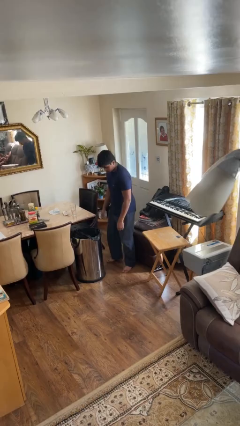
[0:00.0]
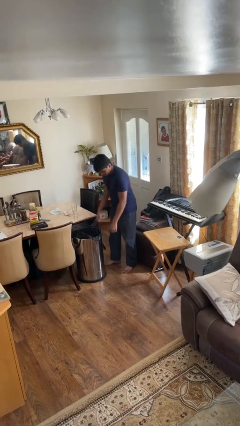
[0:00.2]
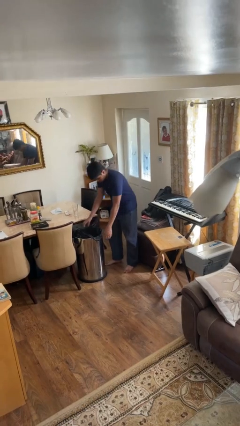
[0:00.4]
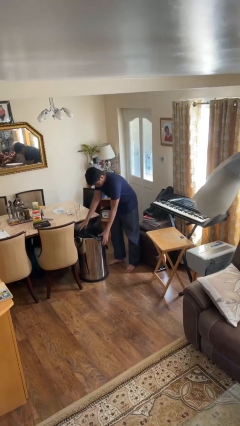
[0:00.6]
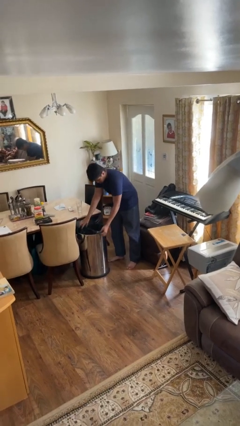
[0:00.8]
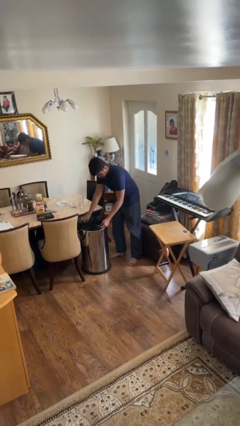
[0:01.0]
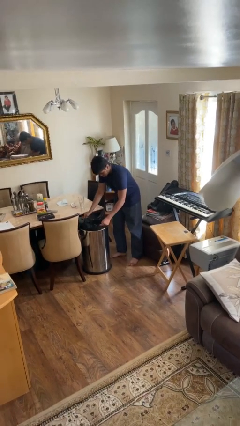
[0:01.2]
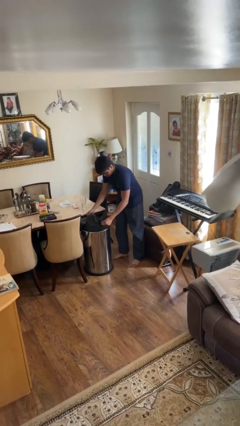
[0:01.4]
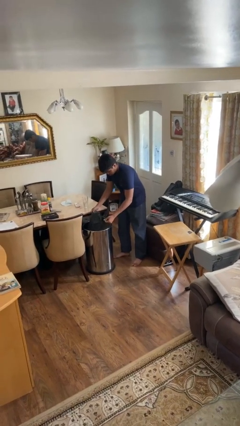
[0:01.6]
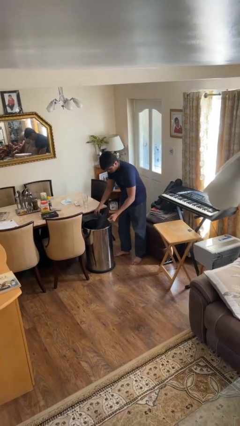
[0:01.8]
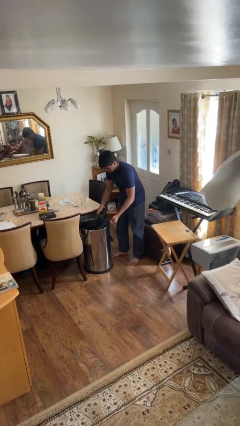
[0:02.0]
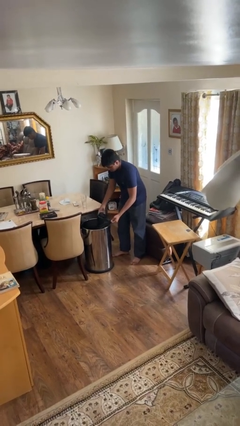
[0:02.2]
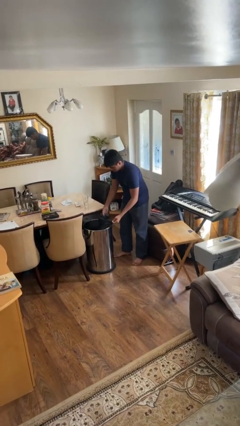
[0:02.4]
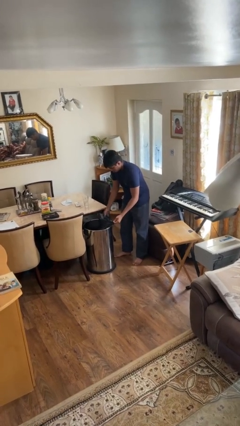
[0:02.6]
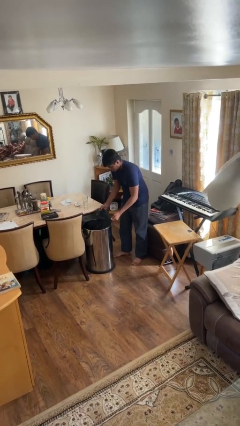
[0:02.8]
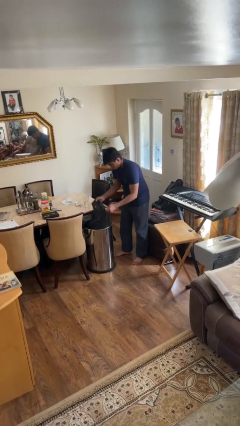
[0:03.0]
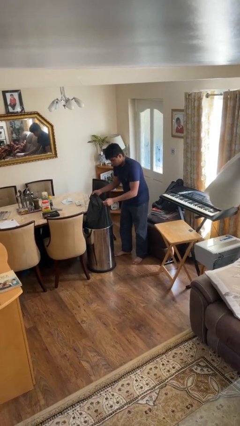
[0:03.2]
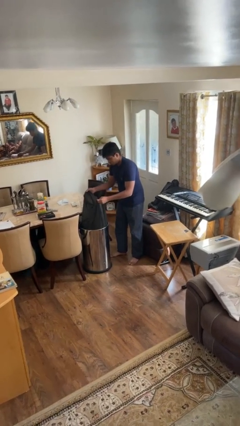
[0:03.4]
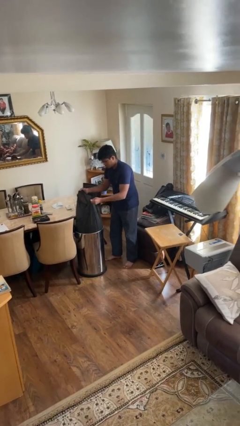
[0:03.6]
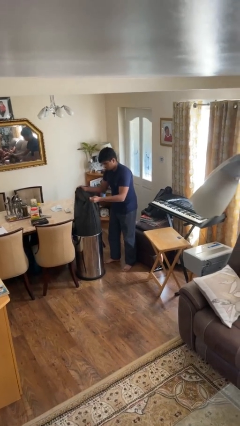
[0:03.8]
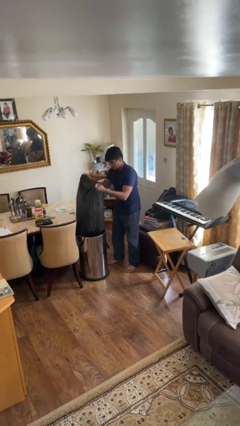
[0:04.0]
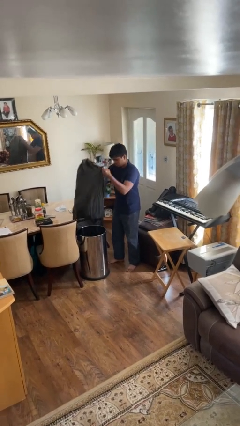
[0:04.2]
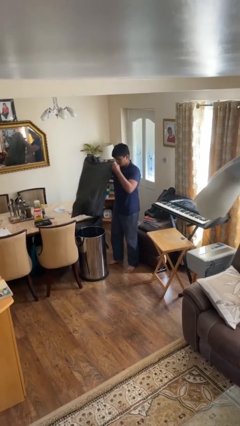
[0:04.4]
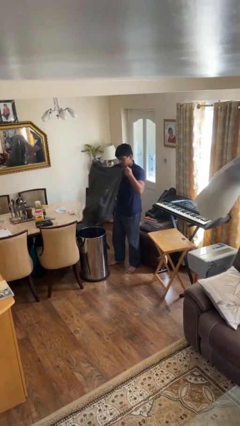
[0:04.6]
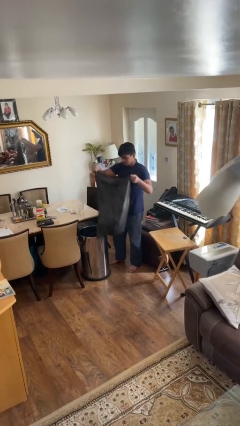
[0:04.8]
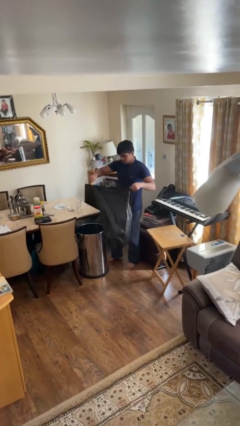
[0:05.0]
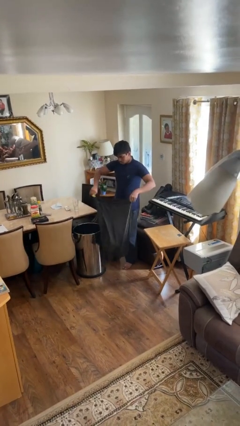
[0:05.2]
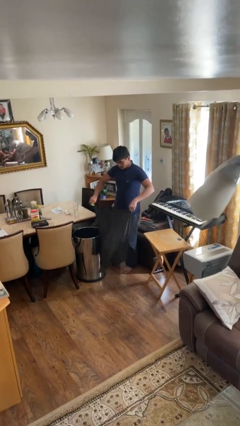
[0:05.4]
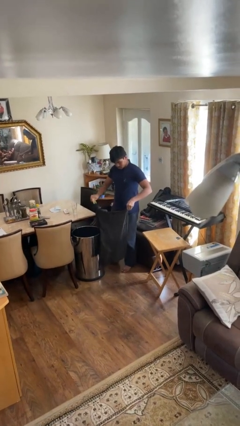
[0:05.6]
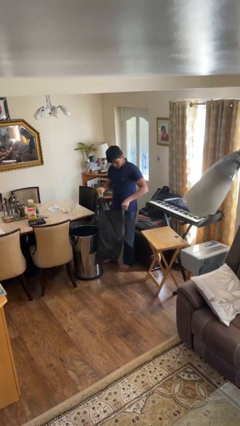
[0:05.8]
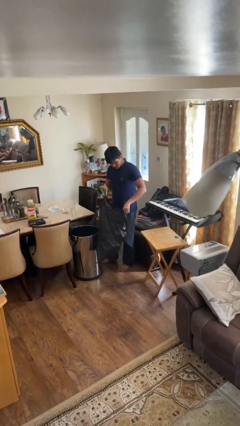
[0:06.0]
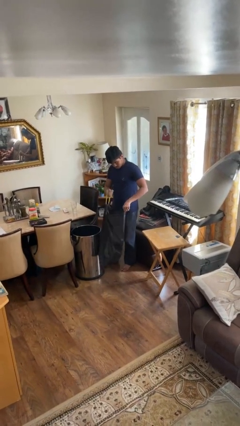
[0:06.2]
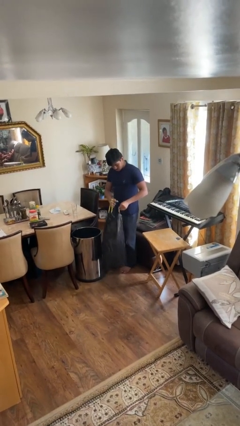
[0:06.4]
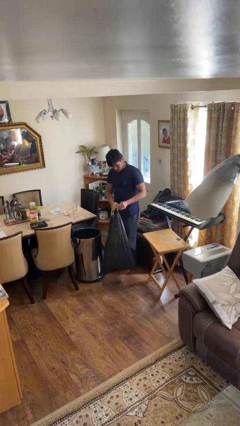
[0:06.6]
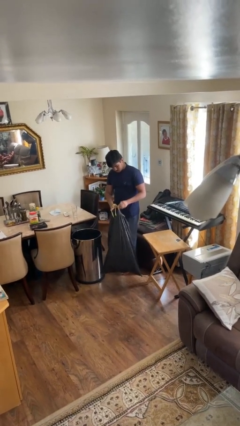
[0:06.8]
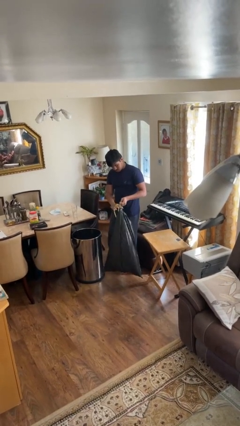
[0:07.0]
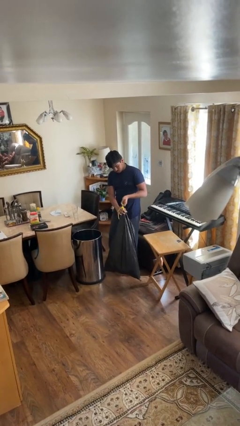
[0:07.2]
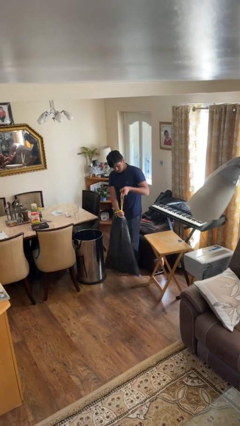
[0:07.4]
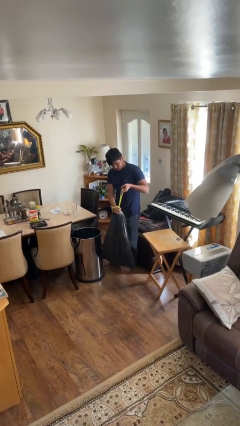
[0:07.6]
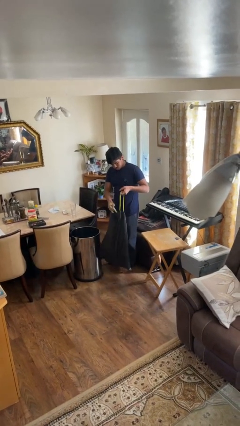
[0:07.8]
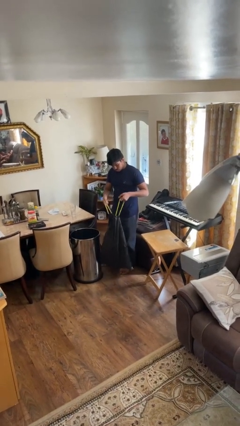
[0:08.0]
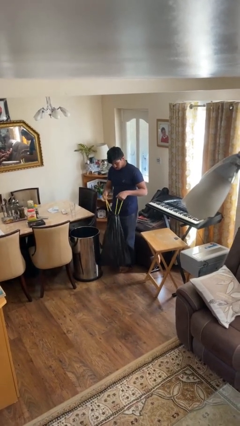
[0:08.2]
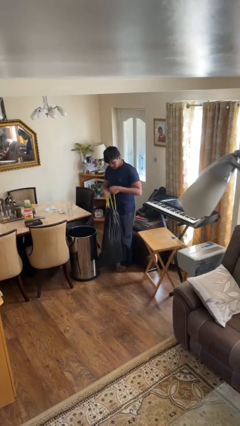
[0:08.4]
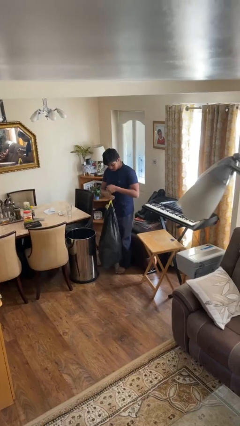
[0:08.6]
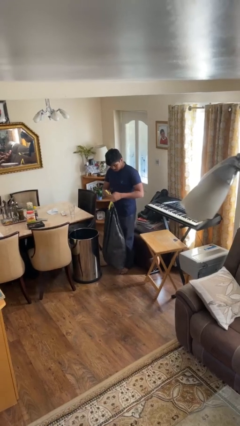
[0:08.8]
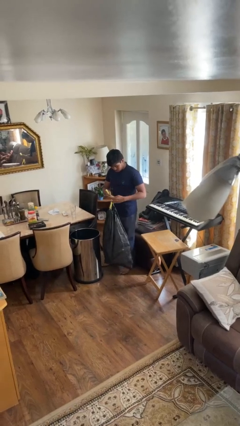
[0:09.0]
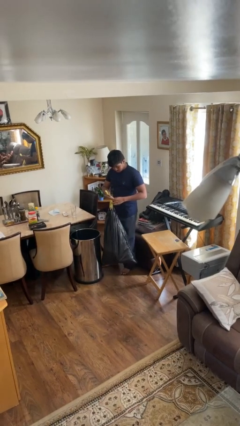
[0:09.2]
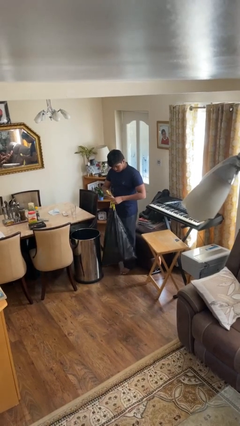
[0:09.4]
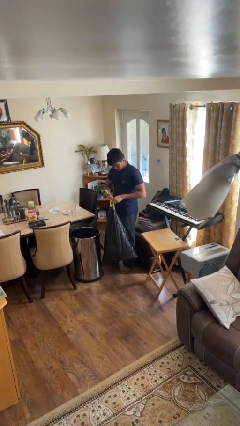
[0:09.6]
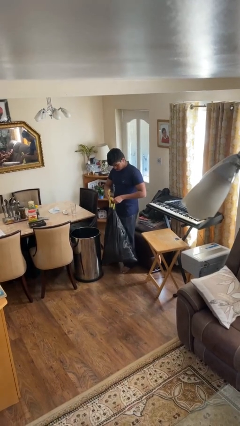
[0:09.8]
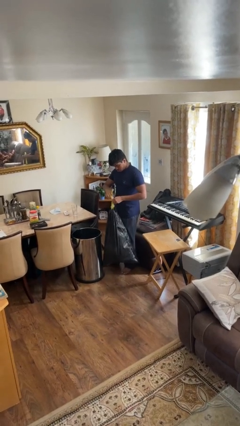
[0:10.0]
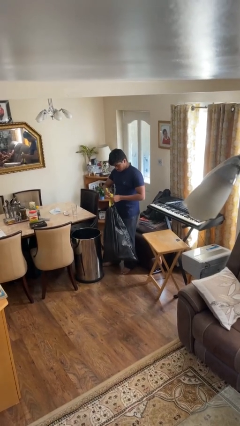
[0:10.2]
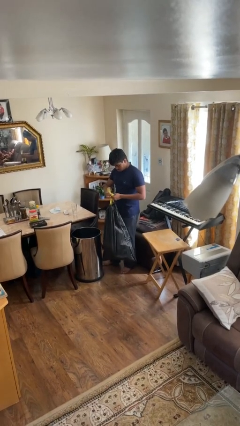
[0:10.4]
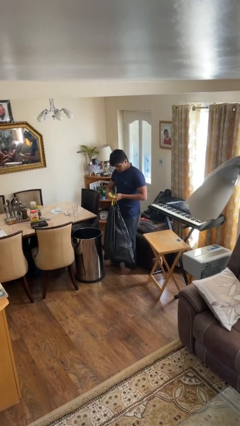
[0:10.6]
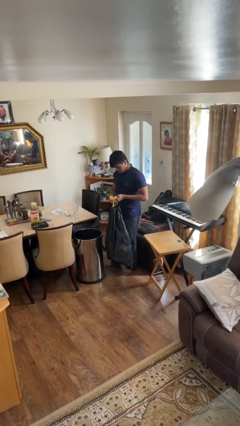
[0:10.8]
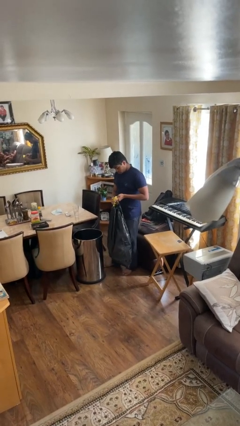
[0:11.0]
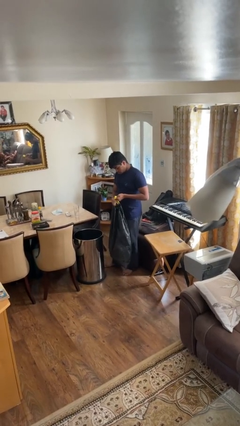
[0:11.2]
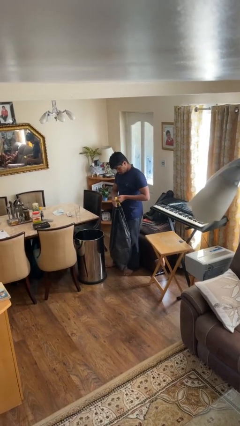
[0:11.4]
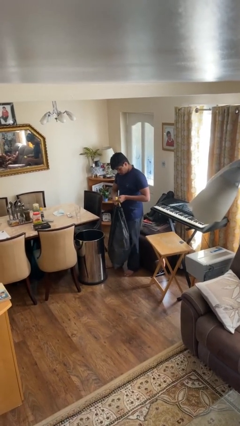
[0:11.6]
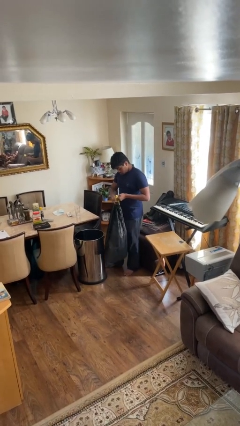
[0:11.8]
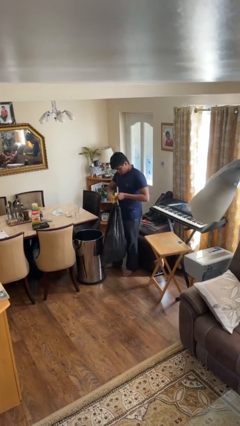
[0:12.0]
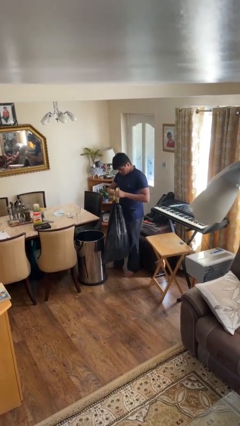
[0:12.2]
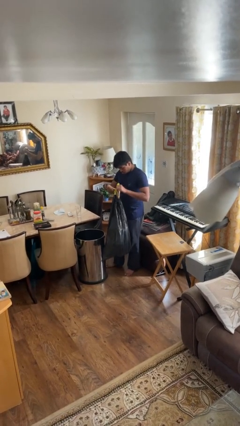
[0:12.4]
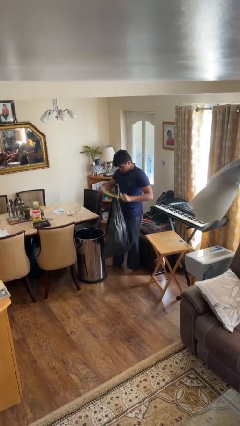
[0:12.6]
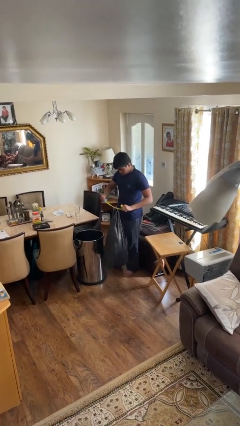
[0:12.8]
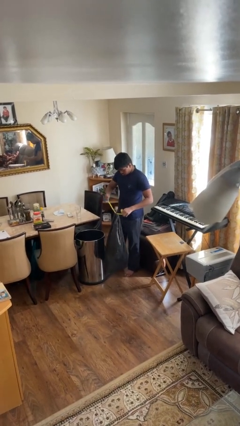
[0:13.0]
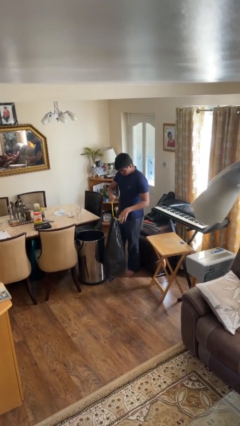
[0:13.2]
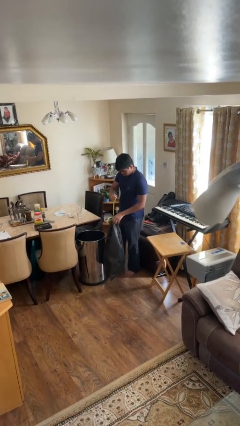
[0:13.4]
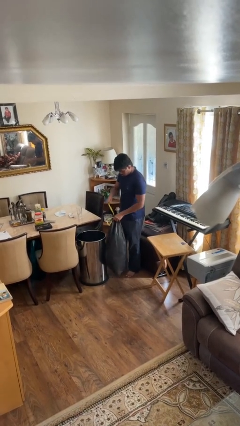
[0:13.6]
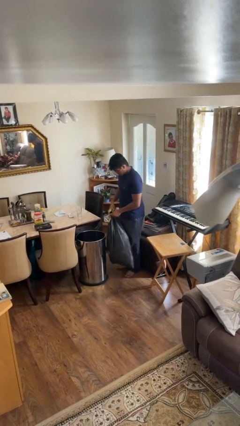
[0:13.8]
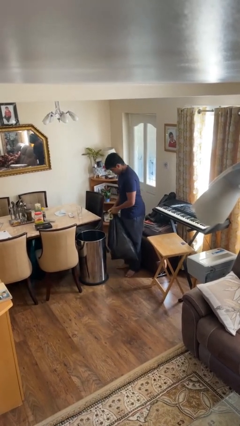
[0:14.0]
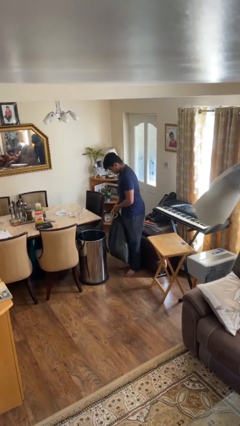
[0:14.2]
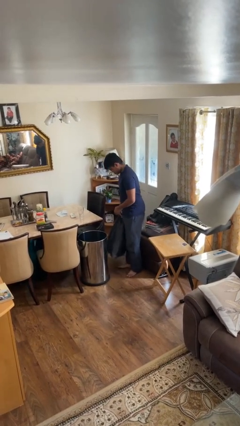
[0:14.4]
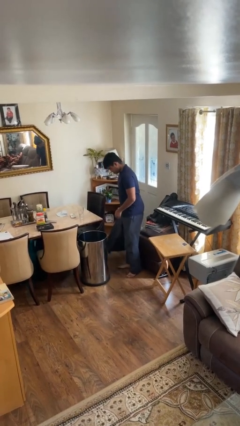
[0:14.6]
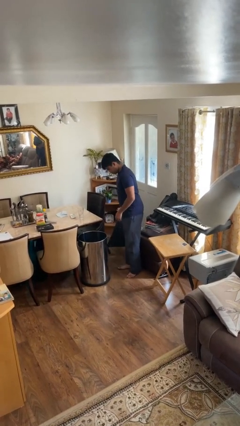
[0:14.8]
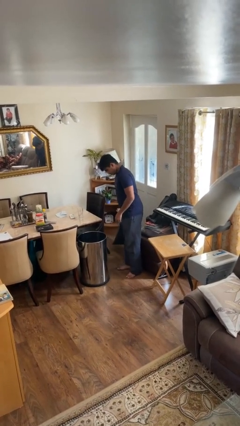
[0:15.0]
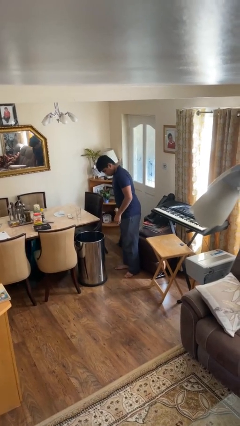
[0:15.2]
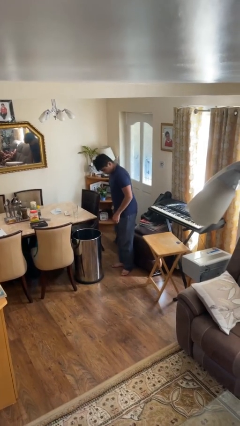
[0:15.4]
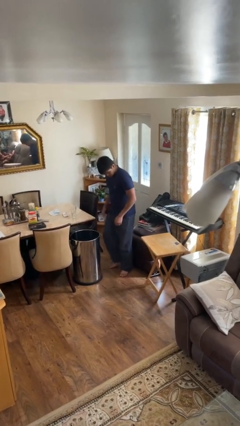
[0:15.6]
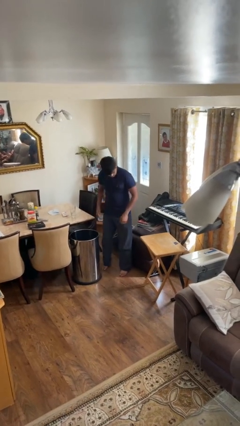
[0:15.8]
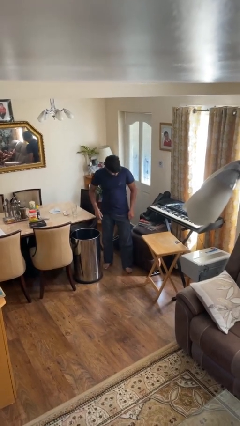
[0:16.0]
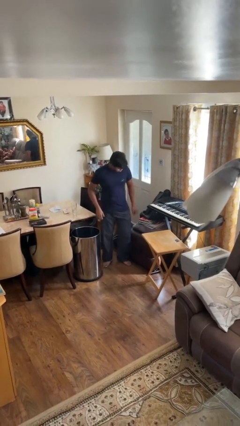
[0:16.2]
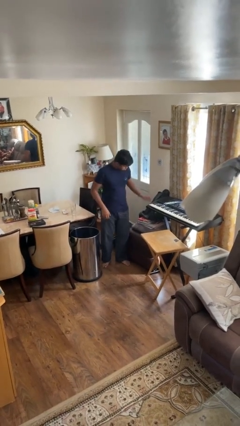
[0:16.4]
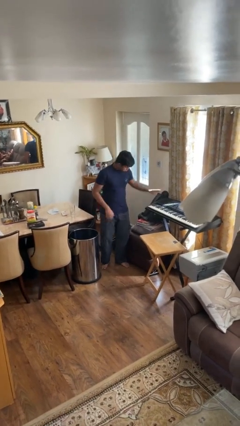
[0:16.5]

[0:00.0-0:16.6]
person removes trashbag from trashcan

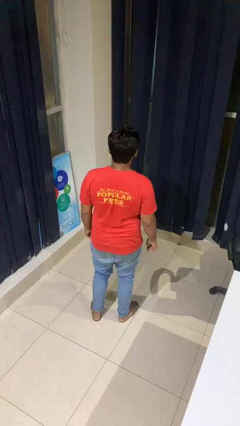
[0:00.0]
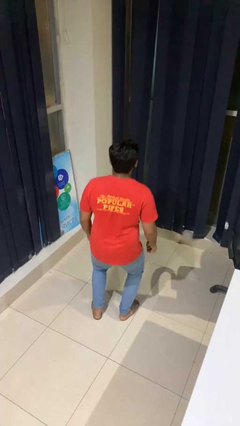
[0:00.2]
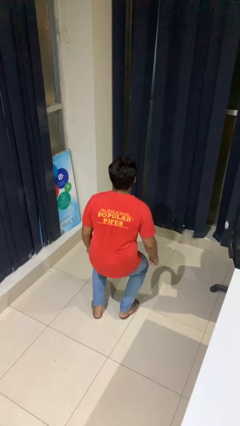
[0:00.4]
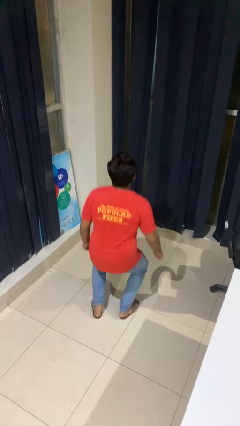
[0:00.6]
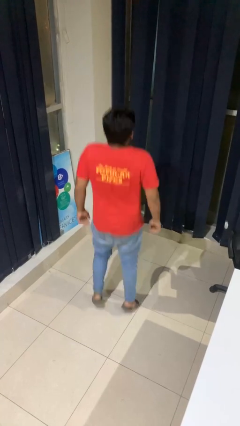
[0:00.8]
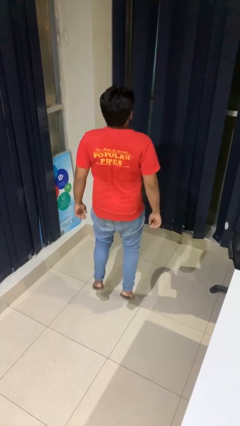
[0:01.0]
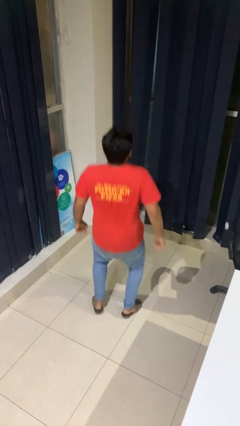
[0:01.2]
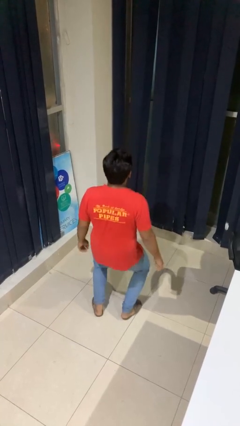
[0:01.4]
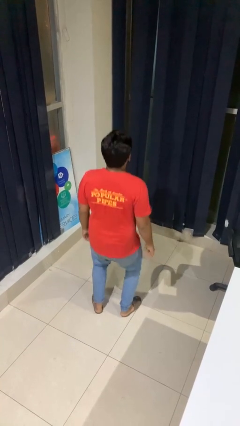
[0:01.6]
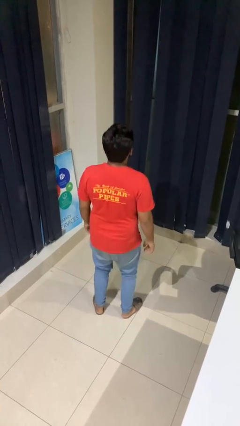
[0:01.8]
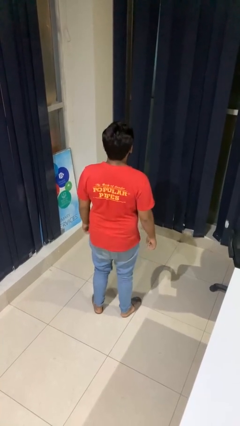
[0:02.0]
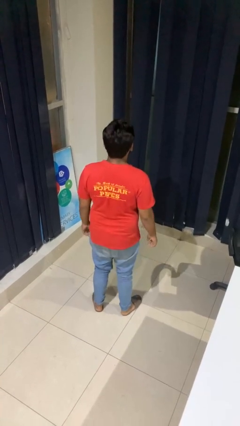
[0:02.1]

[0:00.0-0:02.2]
person jumps
